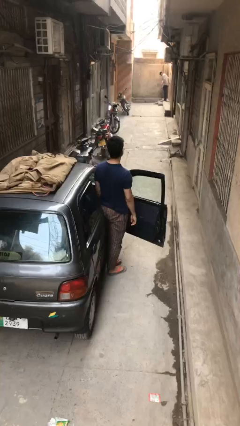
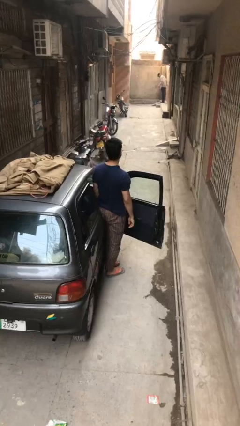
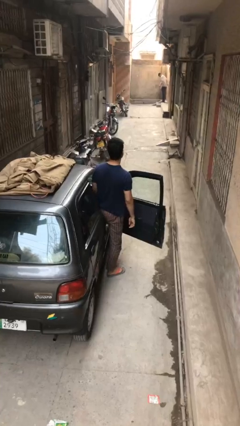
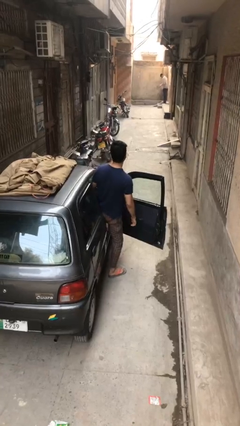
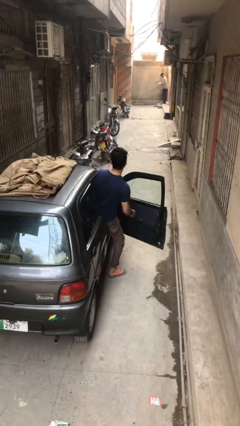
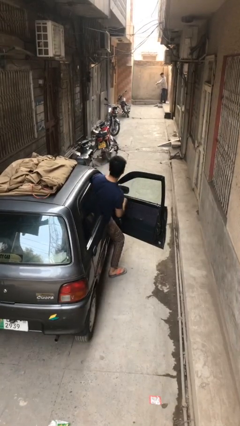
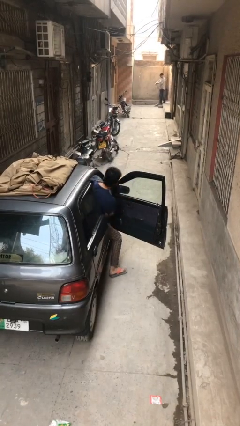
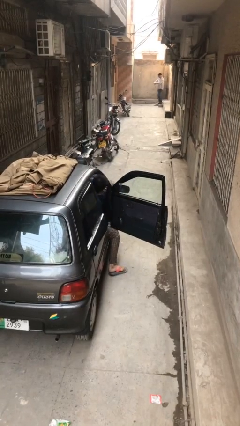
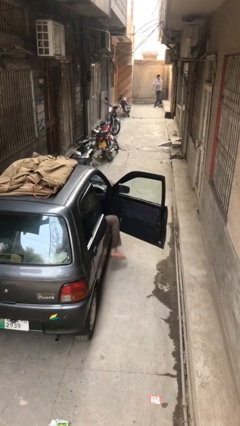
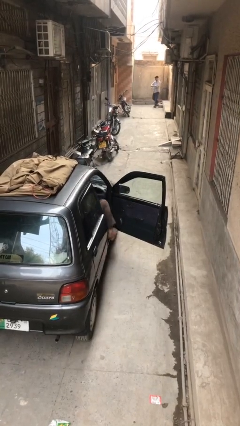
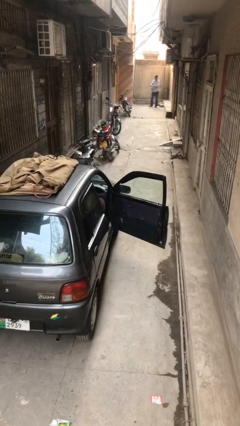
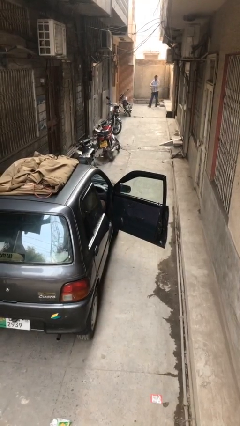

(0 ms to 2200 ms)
person enters car

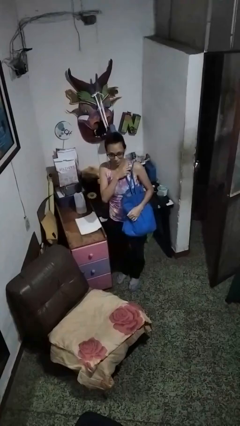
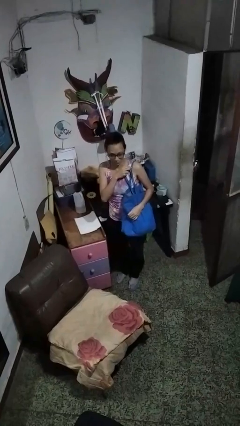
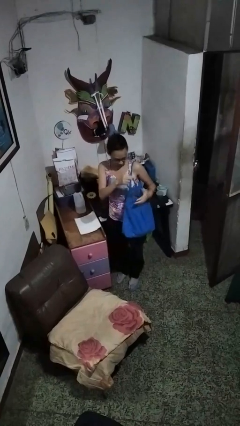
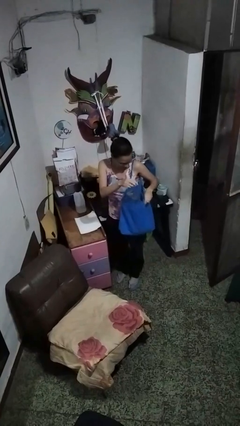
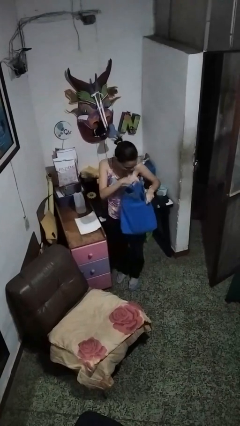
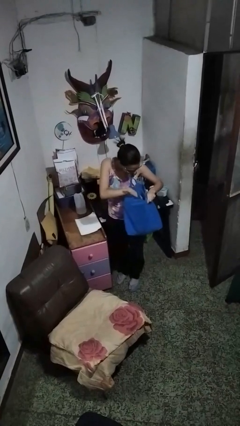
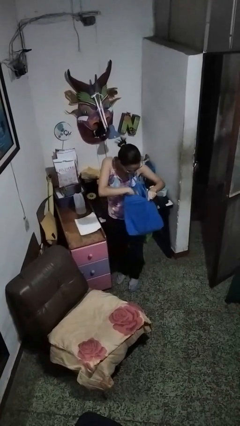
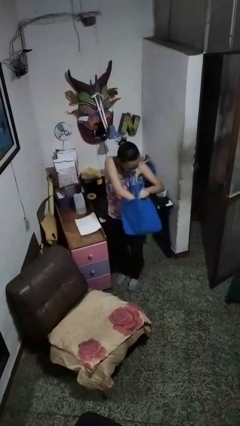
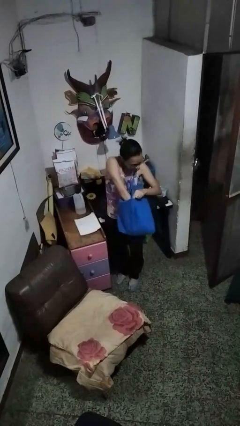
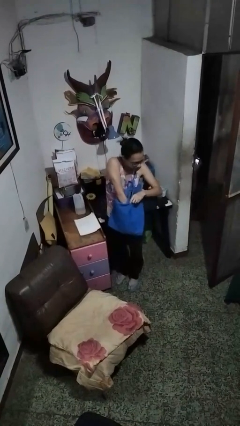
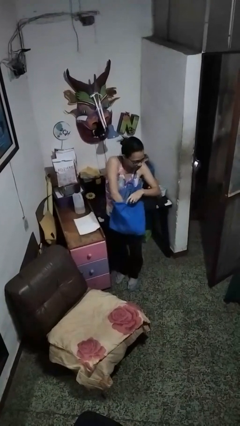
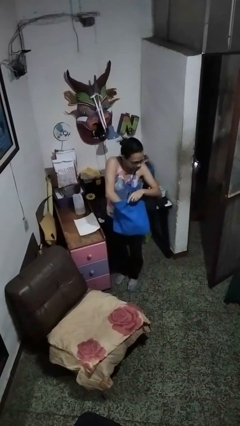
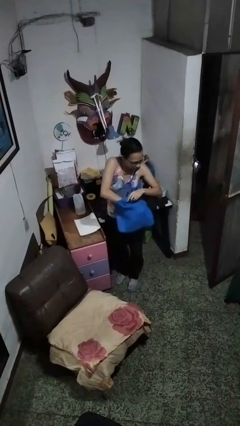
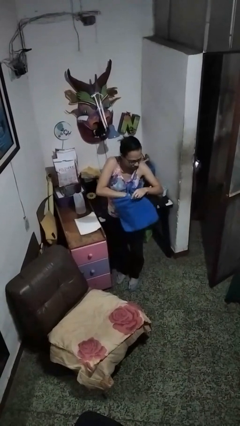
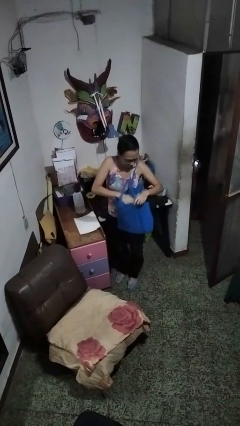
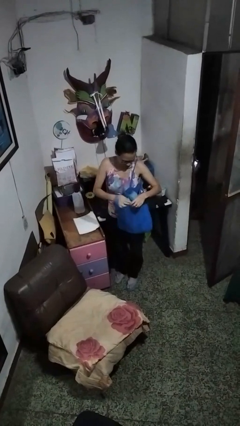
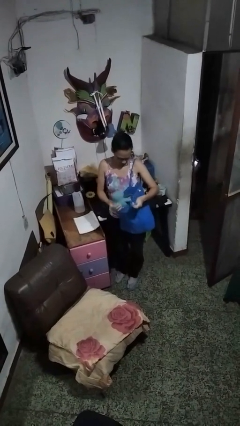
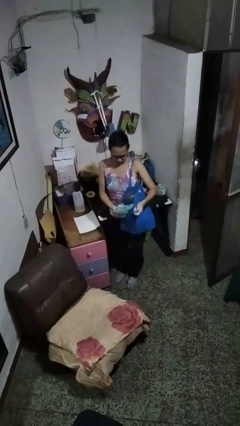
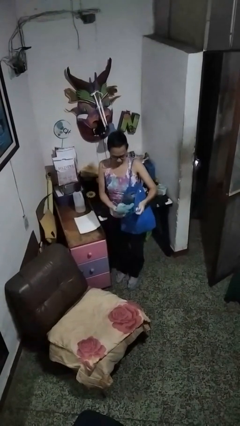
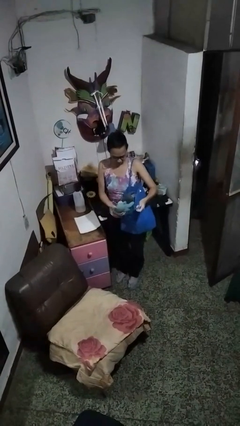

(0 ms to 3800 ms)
person takes object from bag

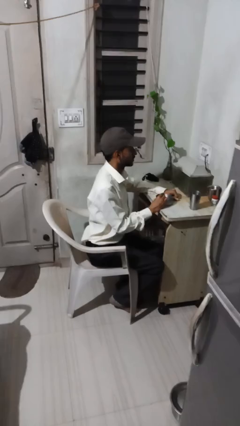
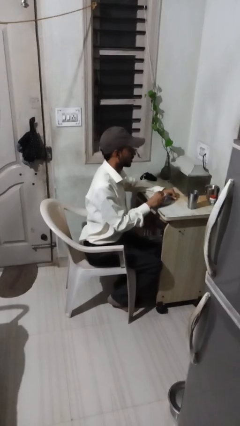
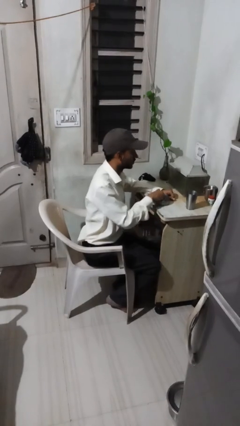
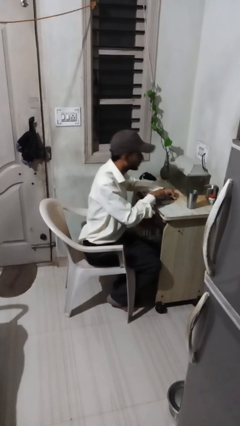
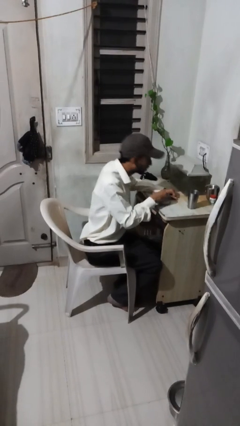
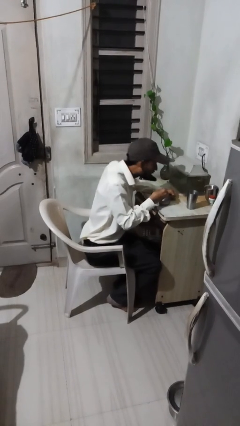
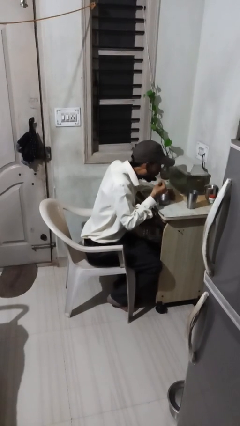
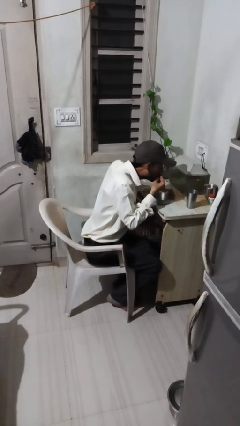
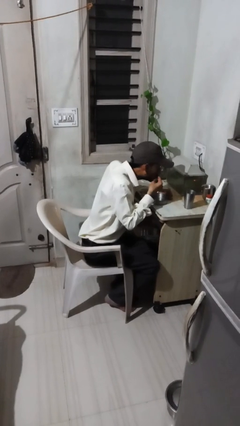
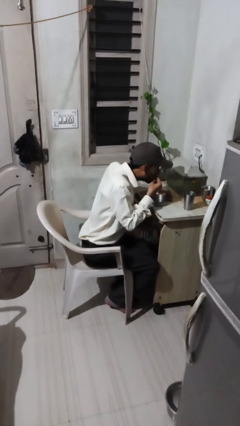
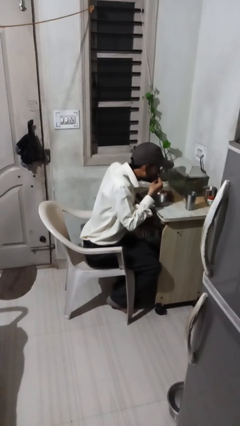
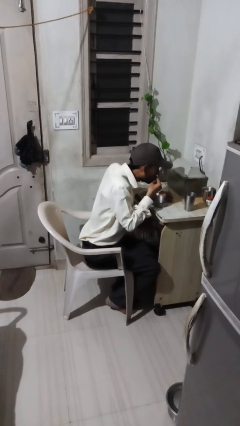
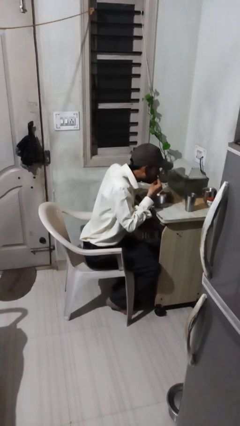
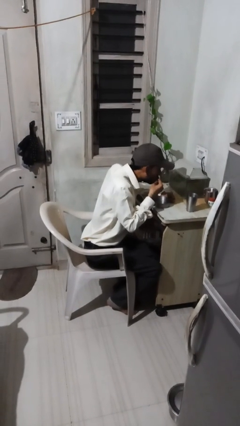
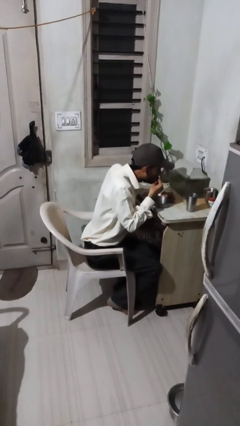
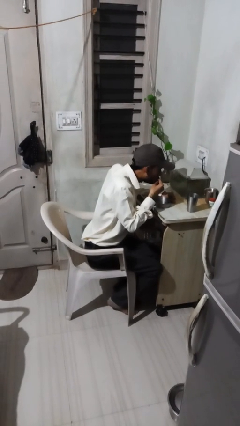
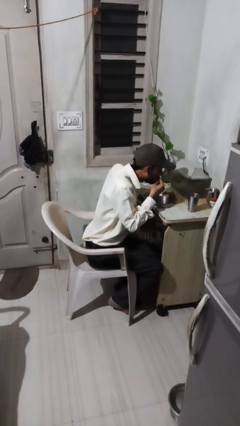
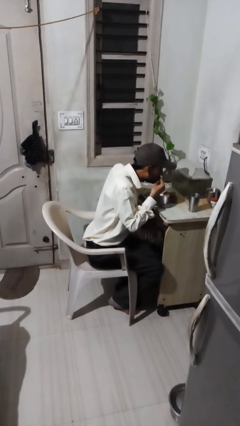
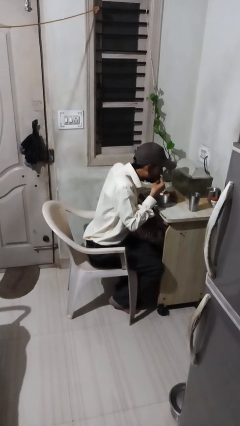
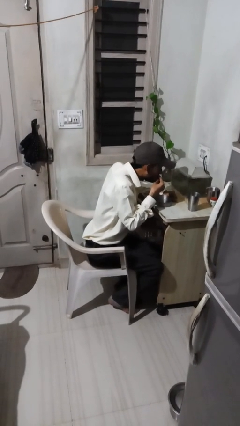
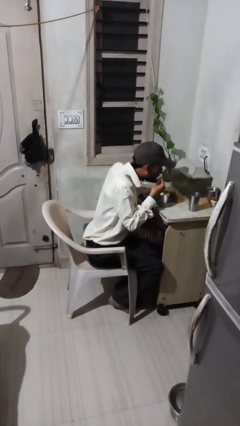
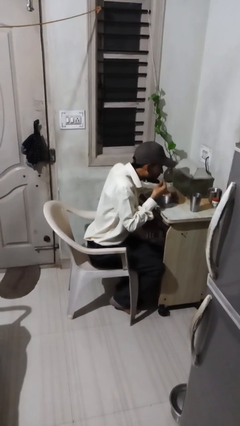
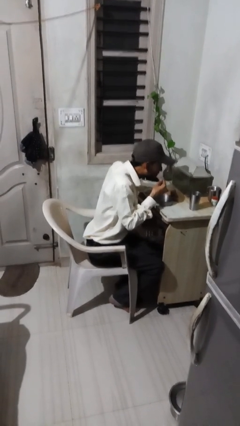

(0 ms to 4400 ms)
person eats with hands

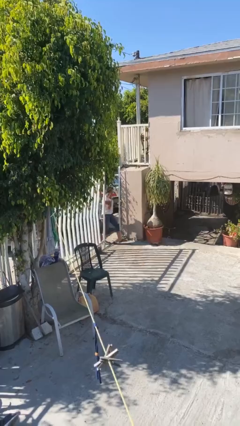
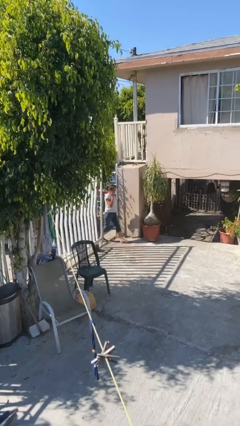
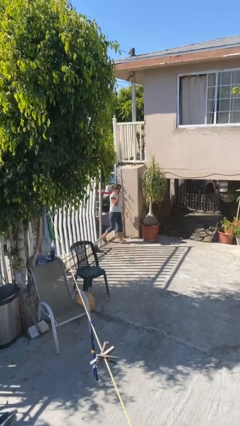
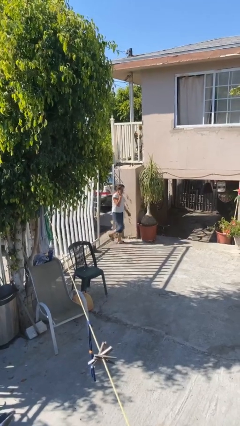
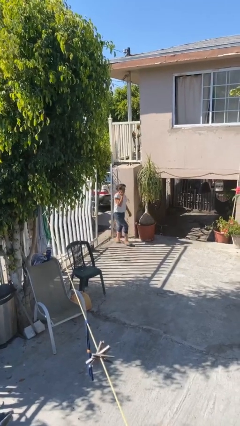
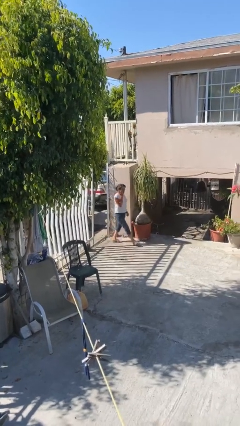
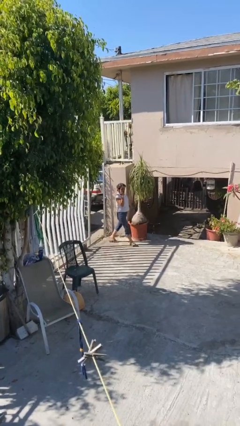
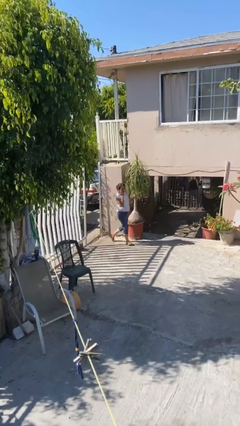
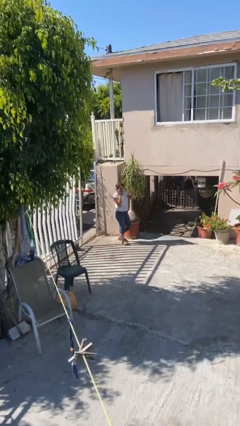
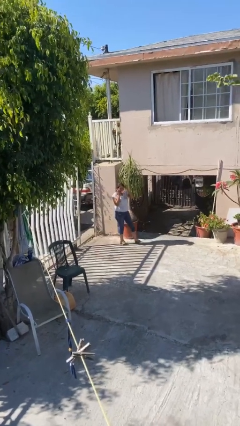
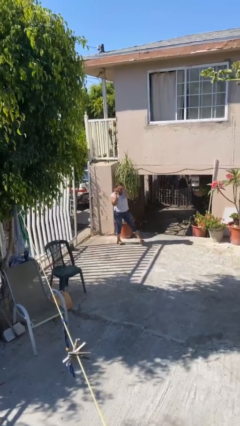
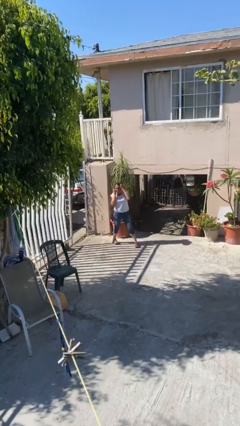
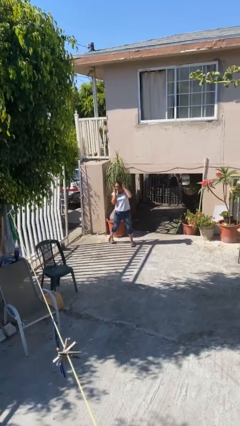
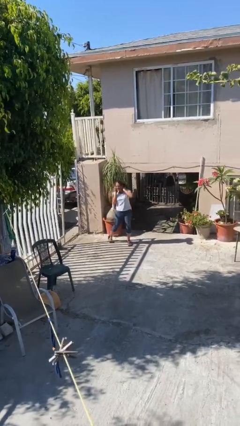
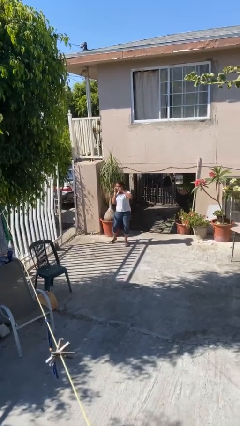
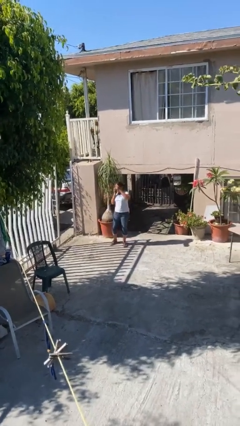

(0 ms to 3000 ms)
person enters scene through structure

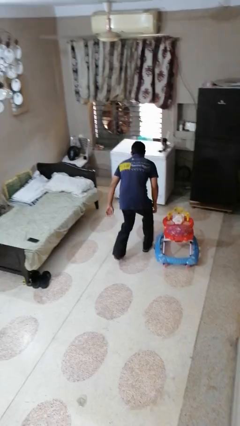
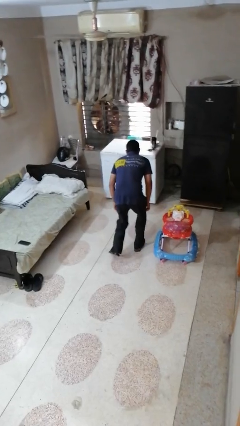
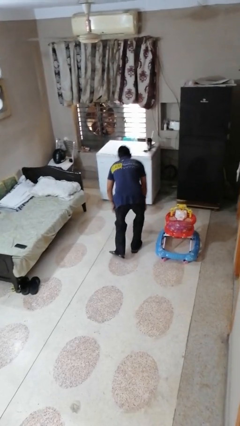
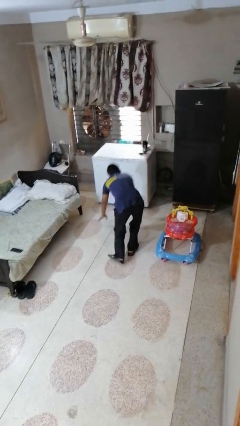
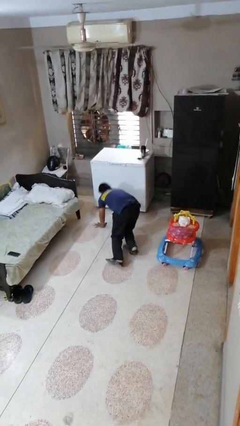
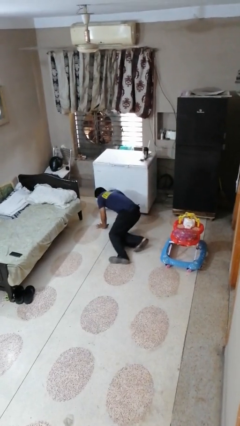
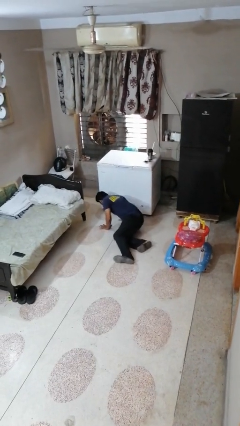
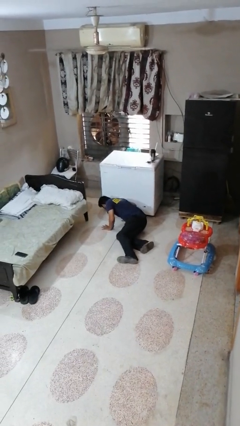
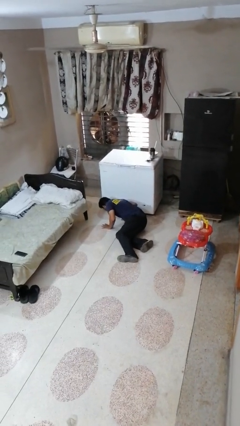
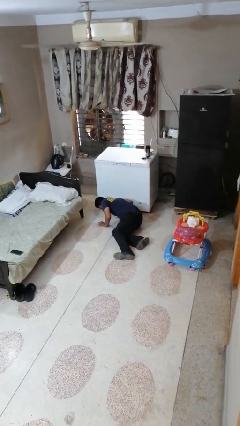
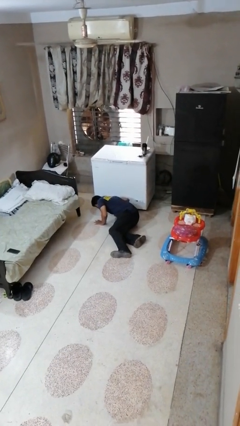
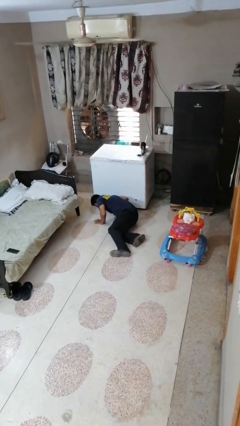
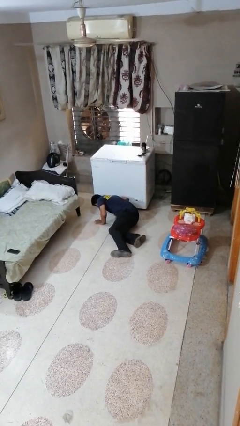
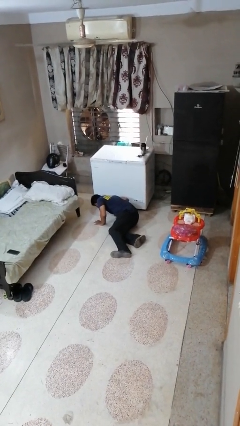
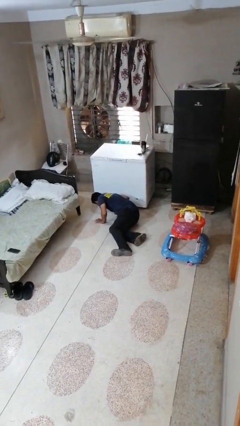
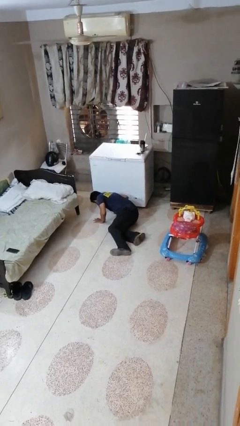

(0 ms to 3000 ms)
person lies down on floor

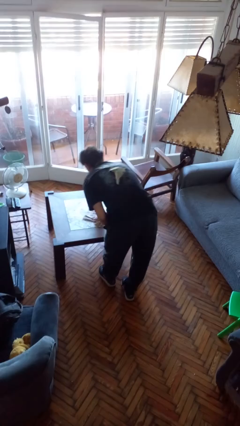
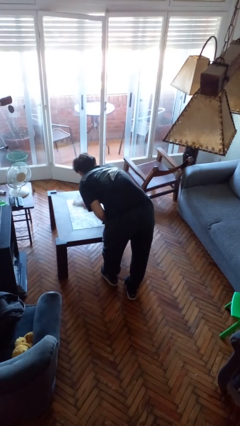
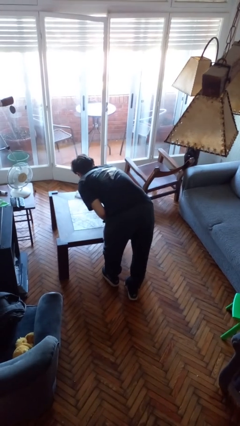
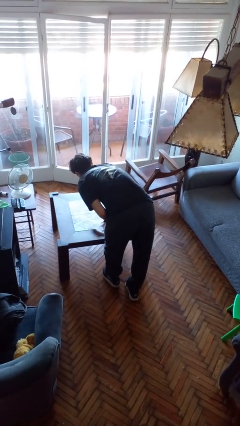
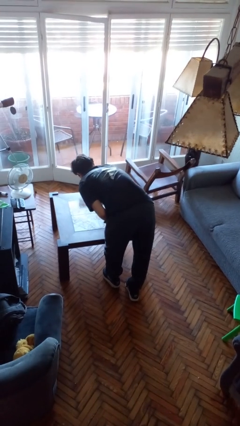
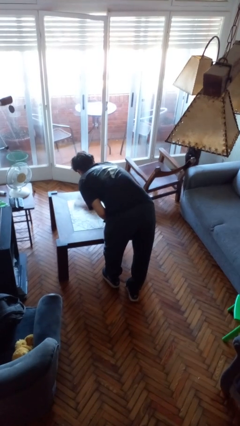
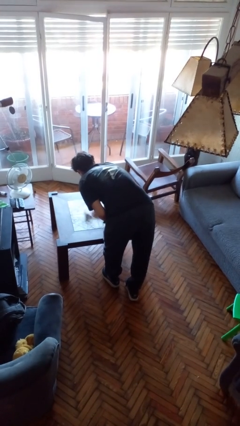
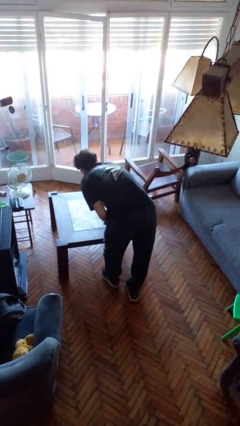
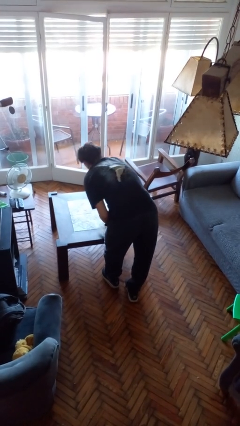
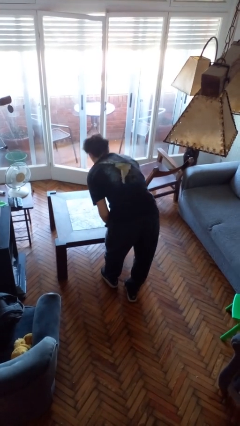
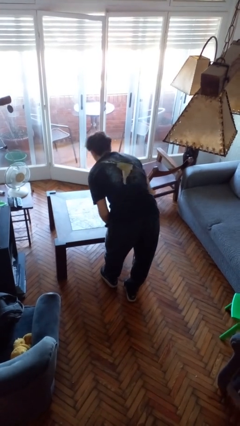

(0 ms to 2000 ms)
person cleans table with rag
